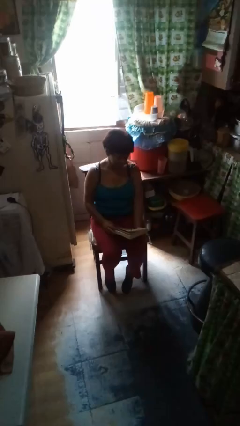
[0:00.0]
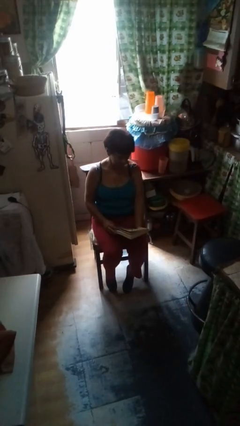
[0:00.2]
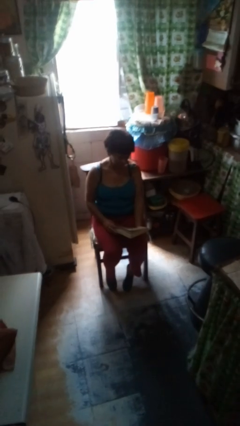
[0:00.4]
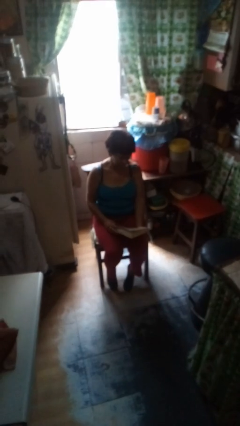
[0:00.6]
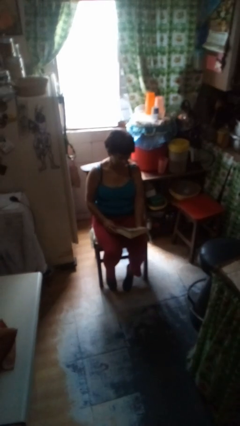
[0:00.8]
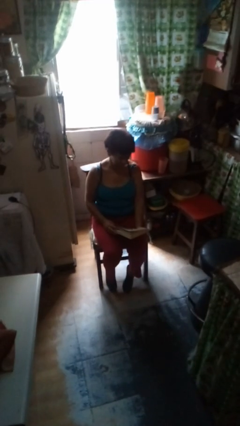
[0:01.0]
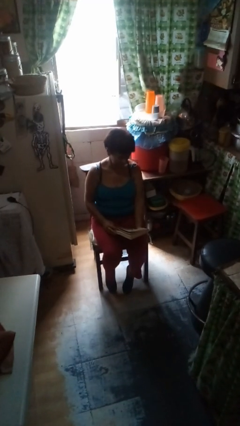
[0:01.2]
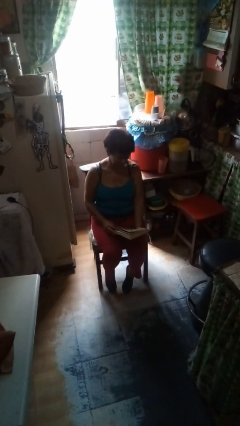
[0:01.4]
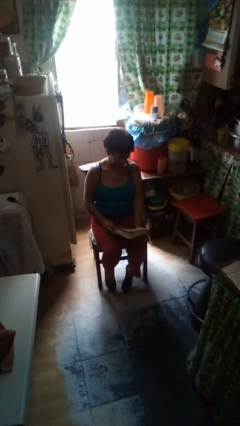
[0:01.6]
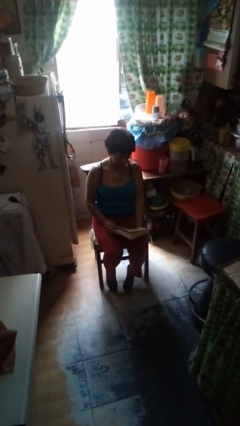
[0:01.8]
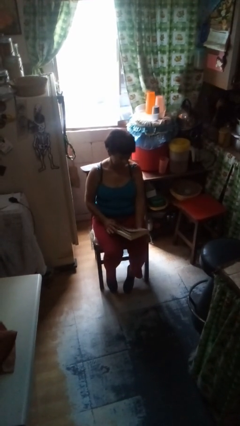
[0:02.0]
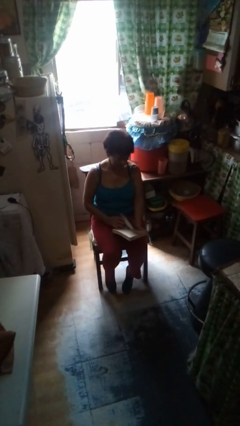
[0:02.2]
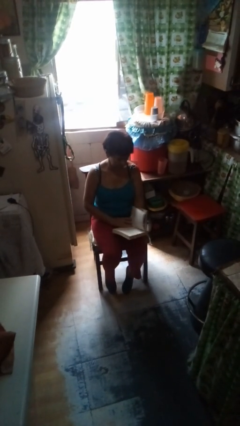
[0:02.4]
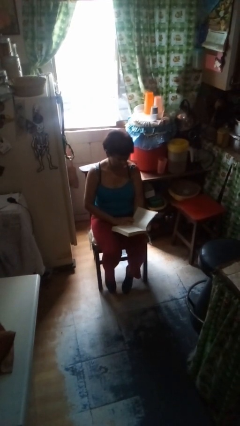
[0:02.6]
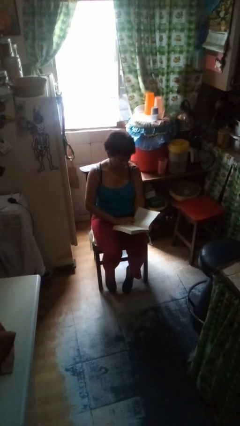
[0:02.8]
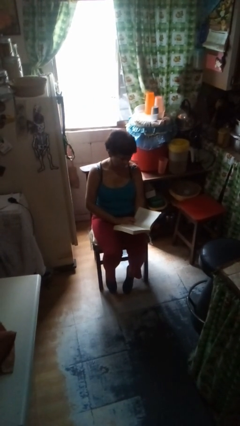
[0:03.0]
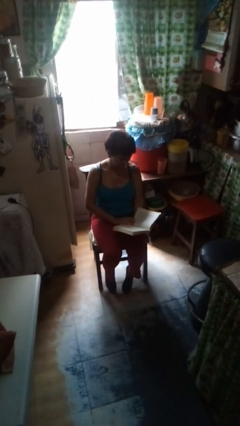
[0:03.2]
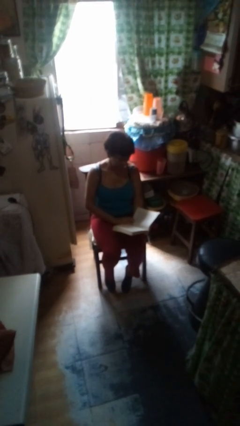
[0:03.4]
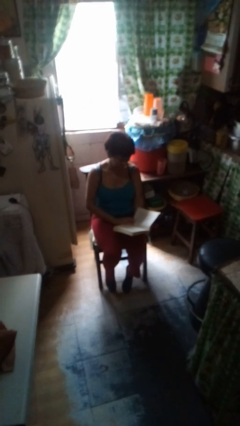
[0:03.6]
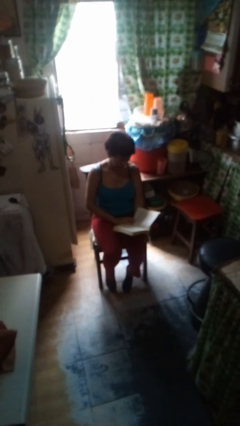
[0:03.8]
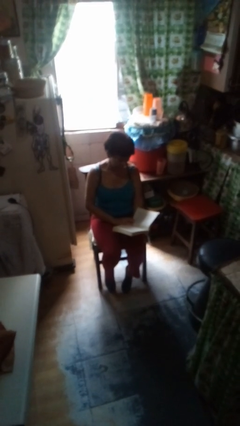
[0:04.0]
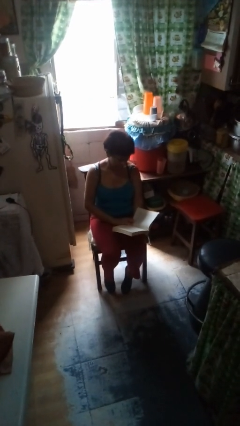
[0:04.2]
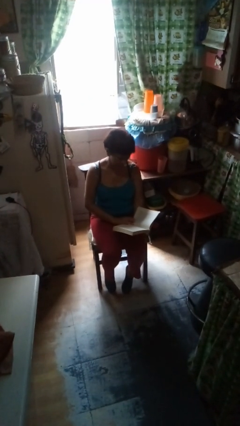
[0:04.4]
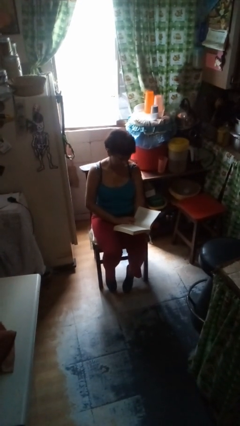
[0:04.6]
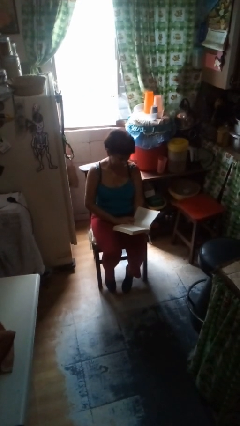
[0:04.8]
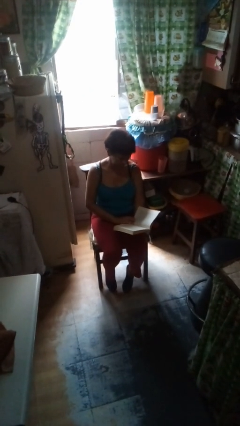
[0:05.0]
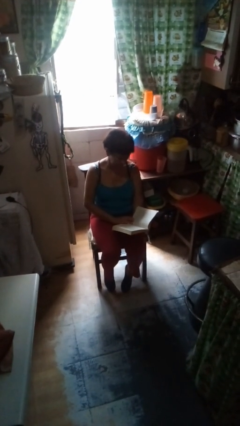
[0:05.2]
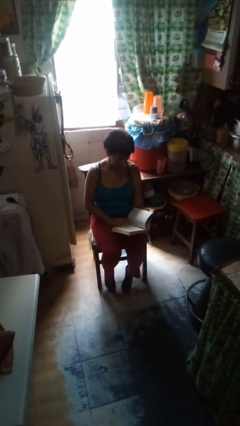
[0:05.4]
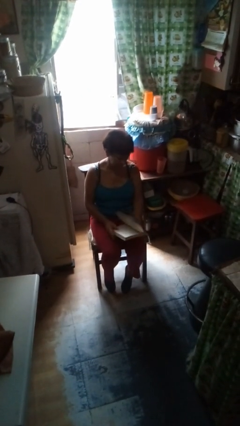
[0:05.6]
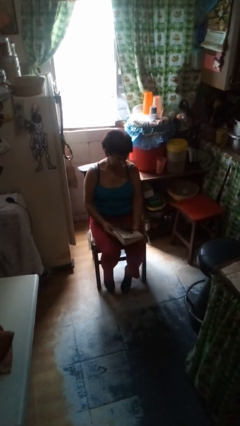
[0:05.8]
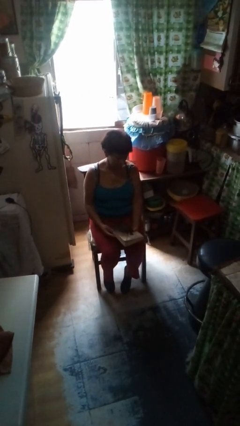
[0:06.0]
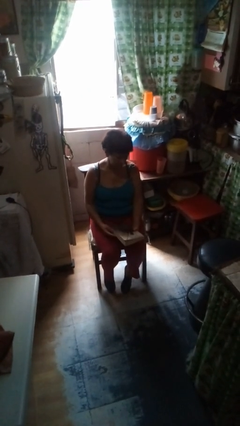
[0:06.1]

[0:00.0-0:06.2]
person reads book

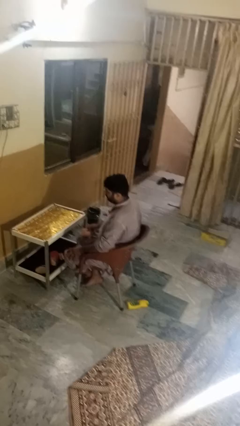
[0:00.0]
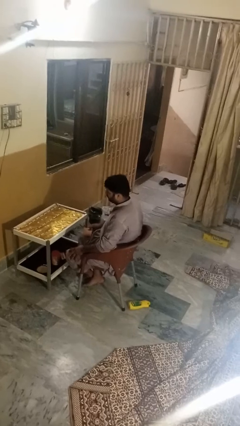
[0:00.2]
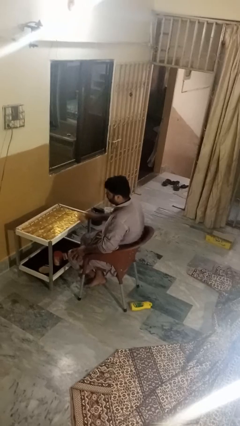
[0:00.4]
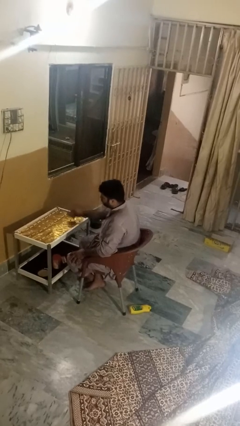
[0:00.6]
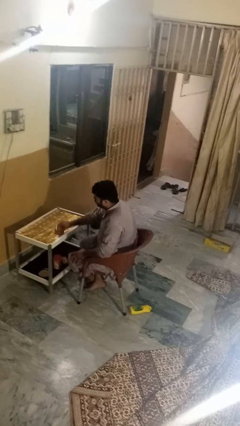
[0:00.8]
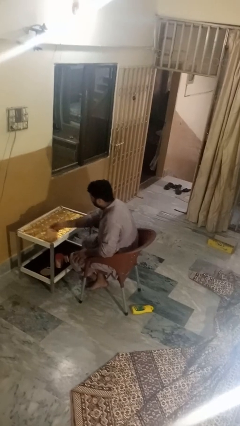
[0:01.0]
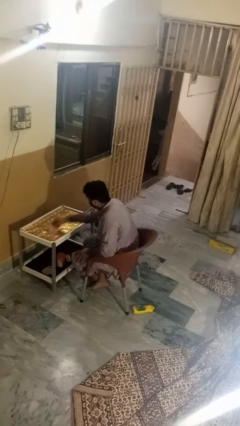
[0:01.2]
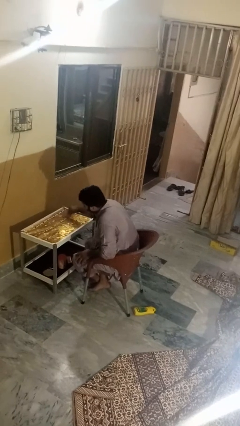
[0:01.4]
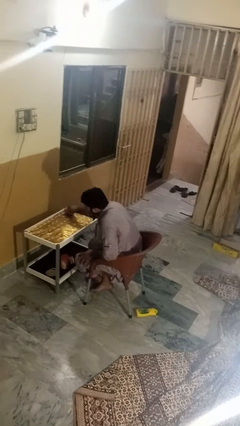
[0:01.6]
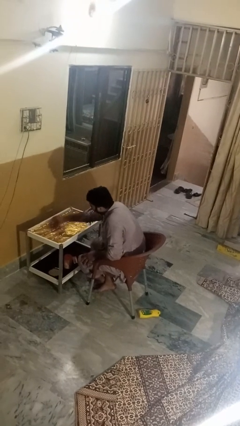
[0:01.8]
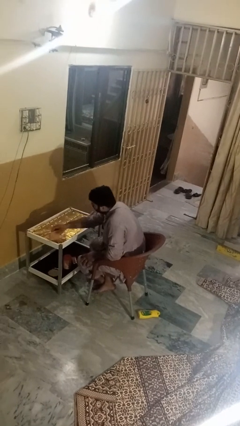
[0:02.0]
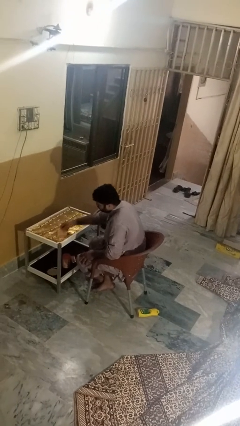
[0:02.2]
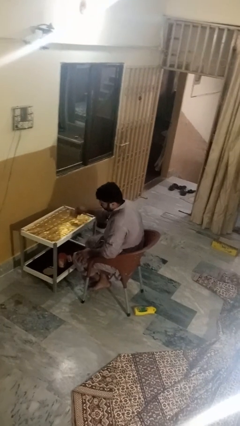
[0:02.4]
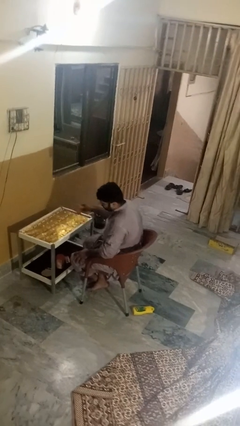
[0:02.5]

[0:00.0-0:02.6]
person cleans table with rag

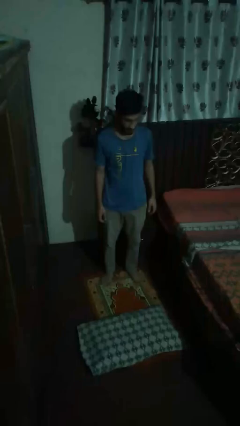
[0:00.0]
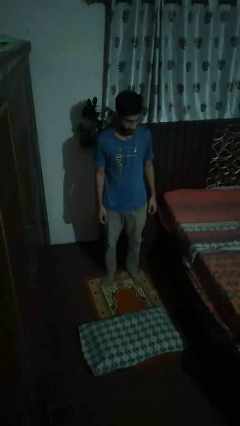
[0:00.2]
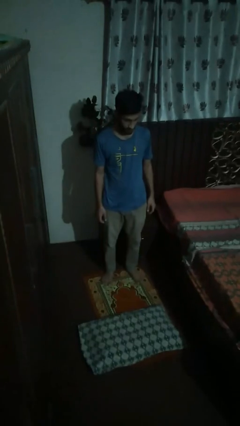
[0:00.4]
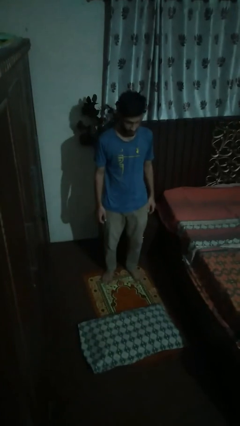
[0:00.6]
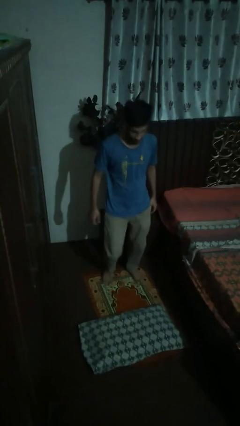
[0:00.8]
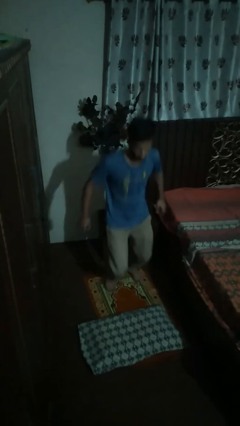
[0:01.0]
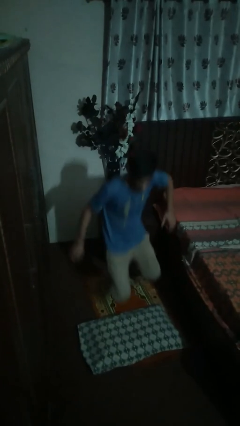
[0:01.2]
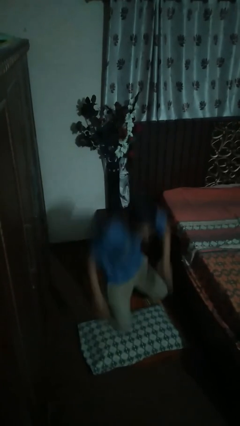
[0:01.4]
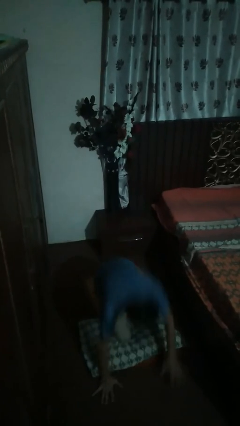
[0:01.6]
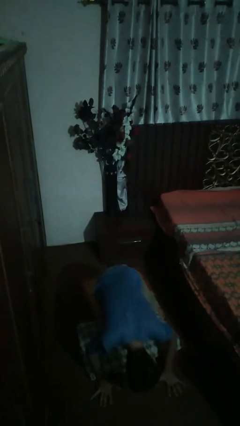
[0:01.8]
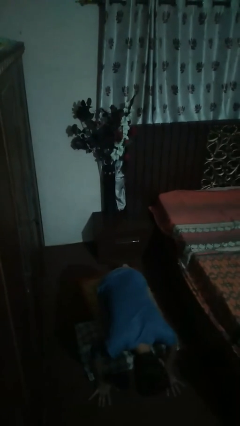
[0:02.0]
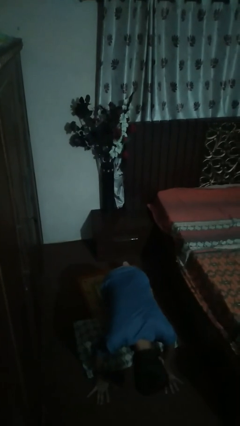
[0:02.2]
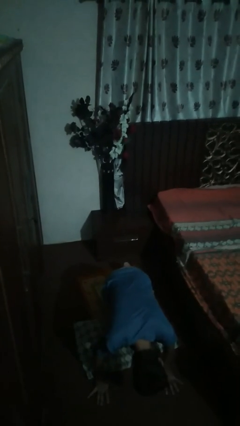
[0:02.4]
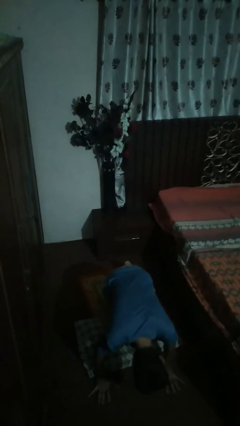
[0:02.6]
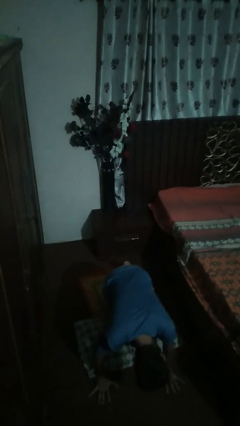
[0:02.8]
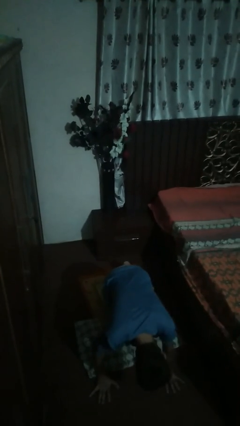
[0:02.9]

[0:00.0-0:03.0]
person trips on object on floor

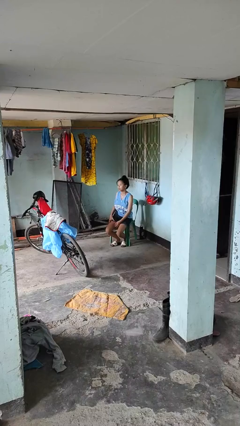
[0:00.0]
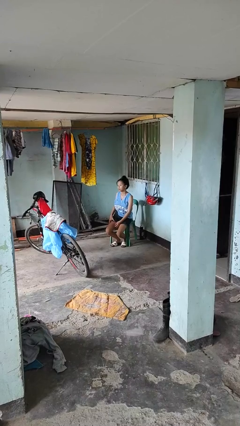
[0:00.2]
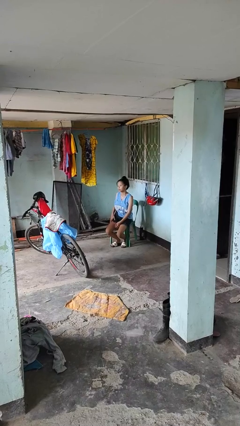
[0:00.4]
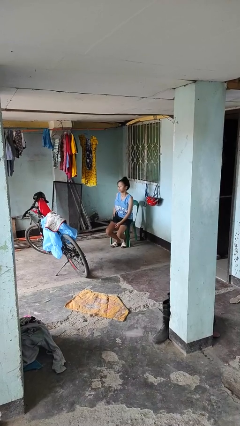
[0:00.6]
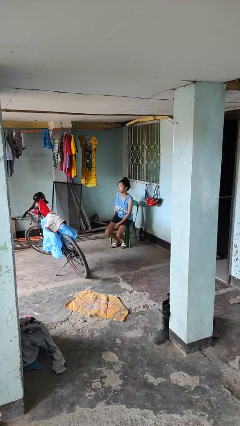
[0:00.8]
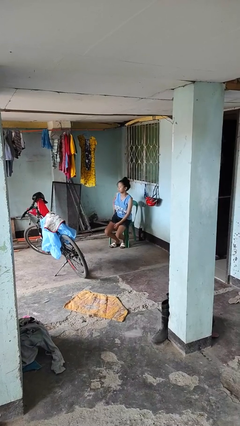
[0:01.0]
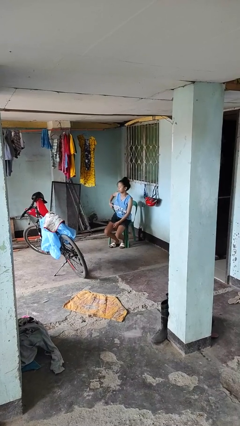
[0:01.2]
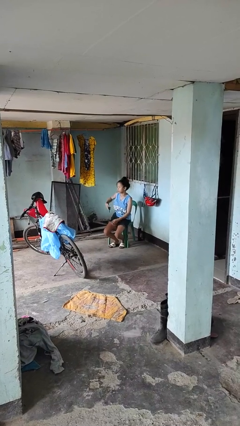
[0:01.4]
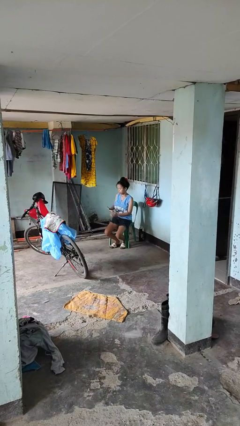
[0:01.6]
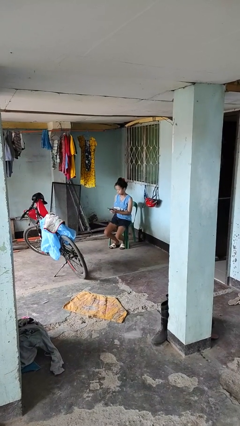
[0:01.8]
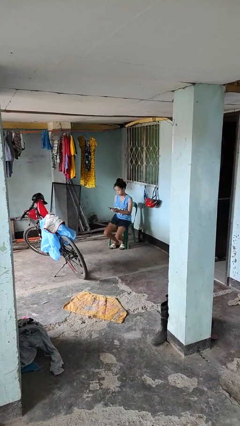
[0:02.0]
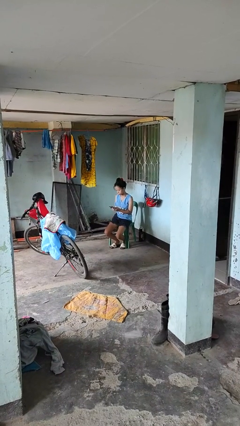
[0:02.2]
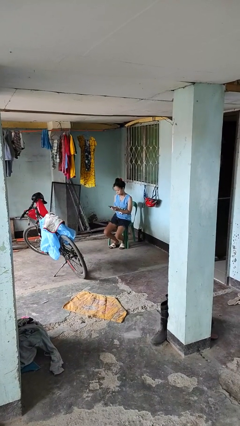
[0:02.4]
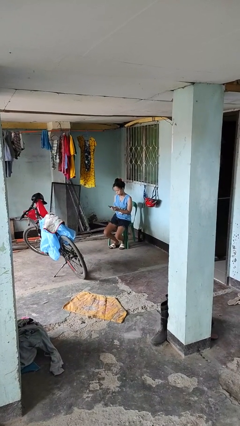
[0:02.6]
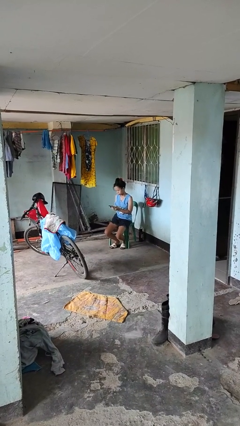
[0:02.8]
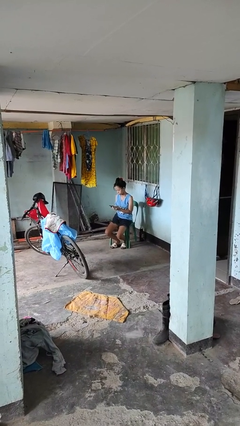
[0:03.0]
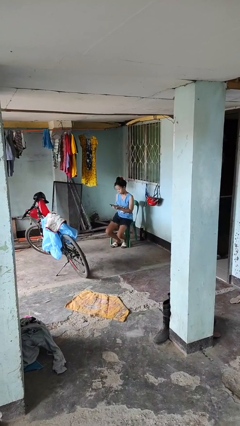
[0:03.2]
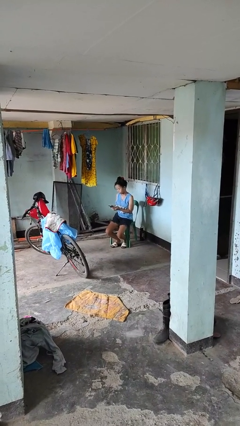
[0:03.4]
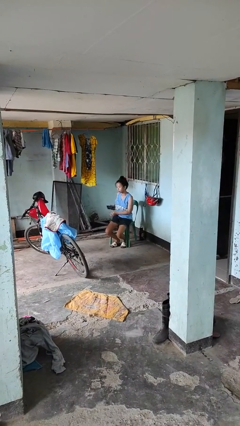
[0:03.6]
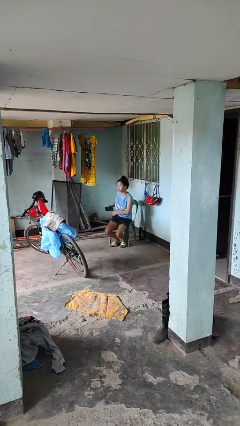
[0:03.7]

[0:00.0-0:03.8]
person takes phone from pocket

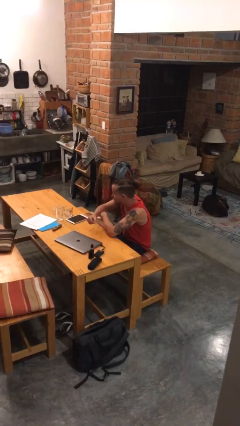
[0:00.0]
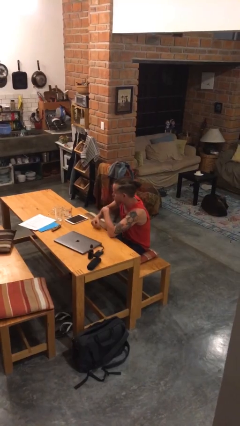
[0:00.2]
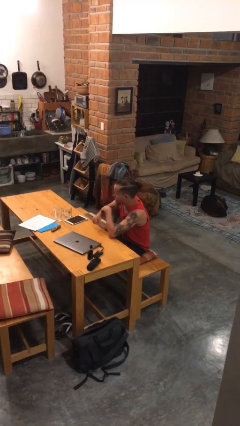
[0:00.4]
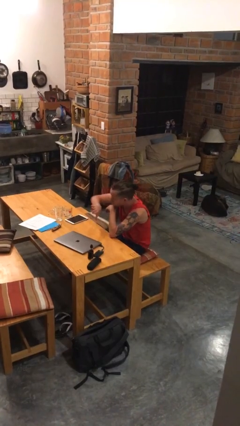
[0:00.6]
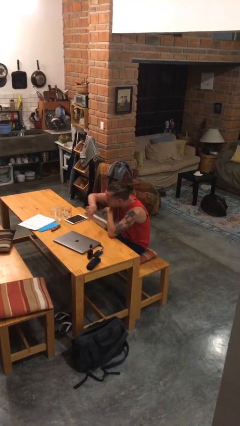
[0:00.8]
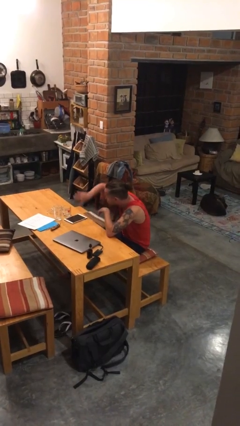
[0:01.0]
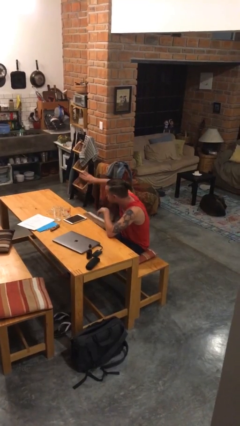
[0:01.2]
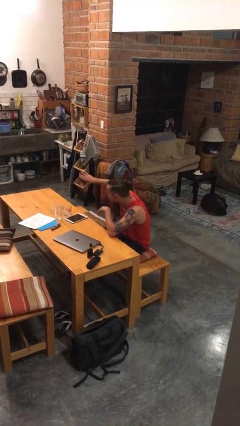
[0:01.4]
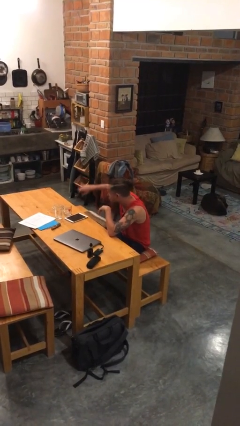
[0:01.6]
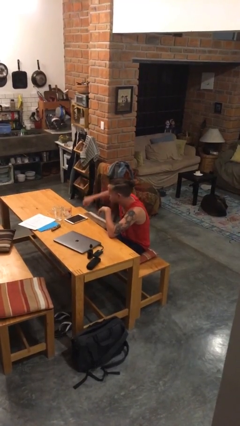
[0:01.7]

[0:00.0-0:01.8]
person gestures swipe right
